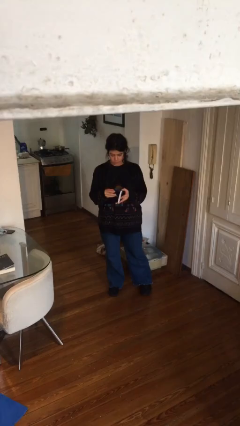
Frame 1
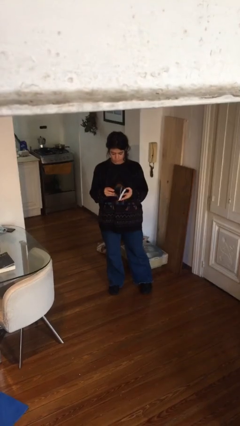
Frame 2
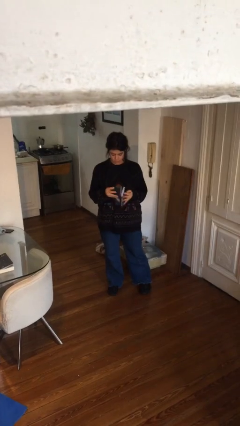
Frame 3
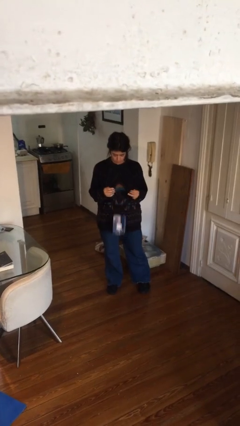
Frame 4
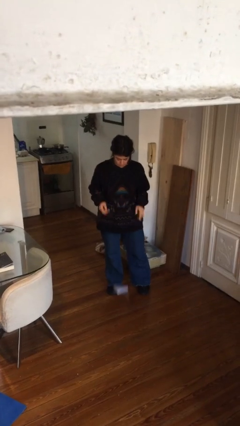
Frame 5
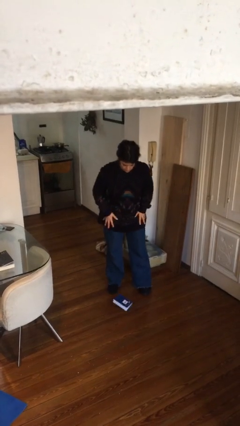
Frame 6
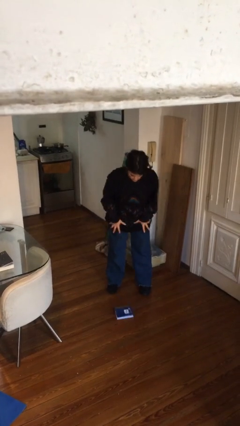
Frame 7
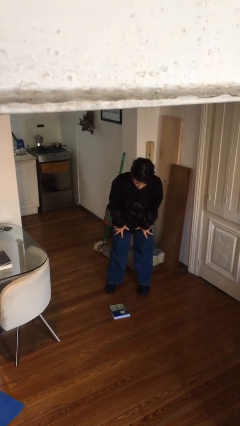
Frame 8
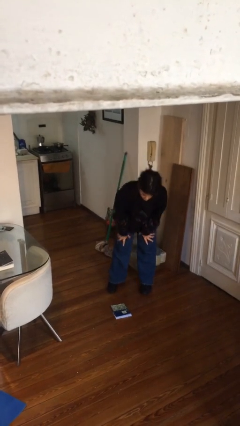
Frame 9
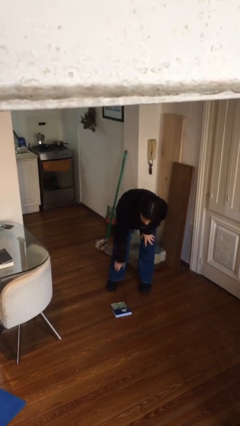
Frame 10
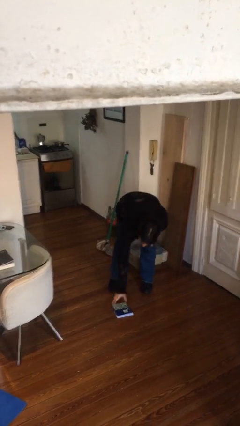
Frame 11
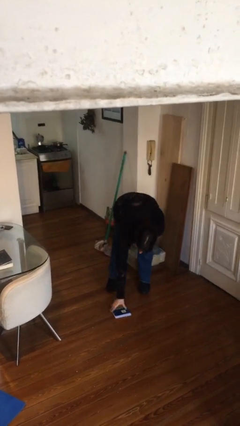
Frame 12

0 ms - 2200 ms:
person drops object

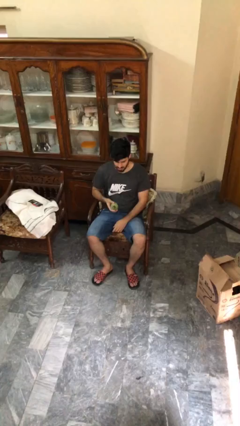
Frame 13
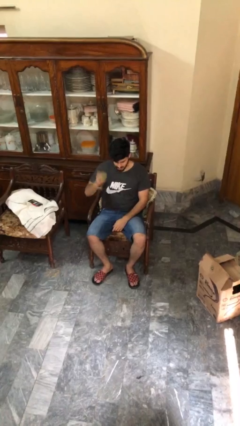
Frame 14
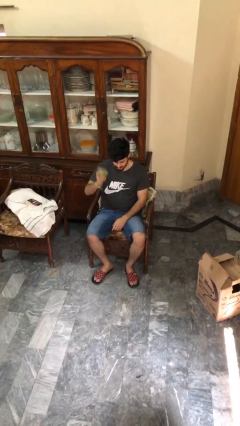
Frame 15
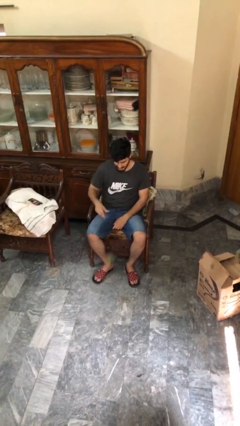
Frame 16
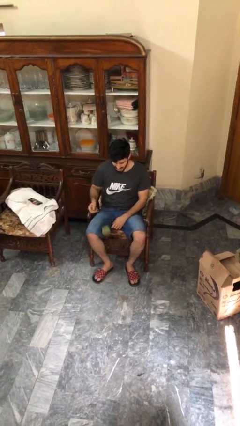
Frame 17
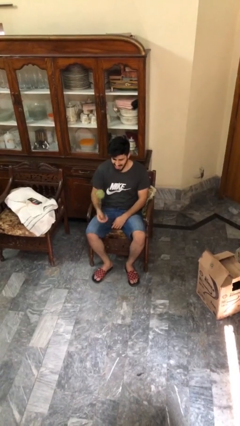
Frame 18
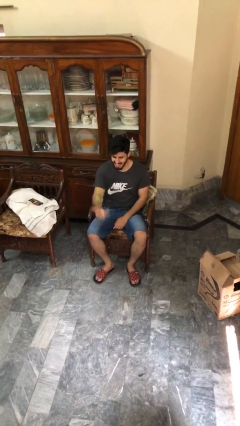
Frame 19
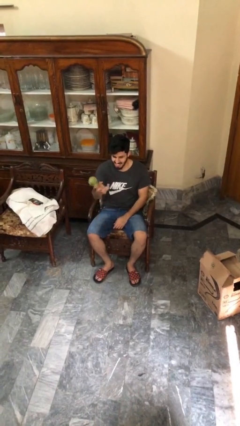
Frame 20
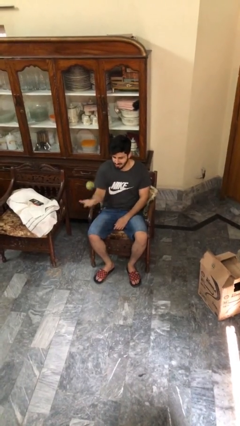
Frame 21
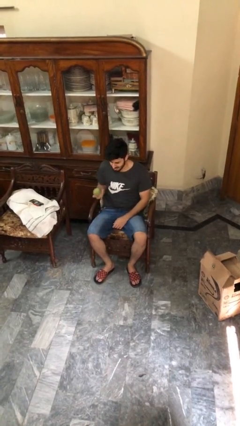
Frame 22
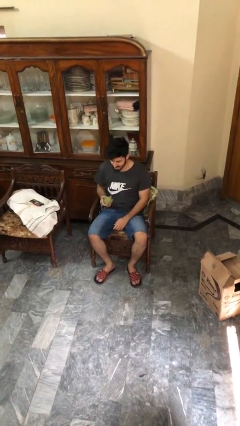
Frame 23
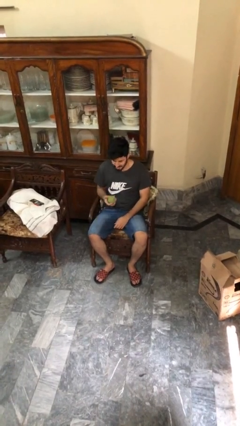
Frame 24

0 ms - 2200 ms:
person bounces ball on floor

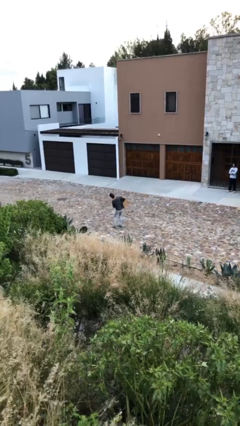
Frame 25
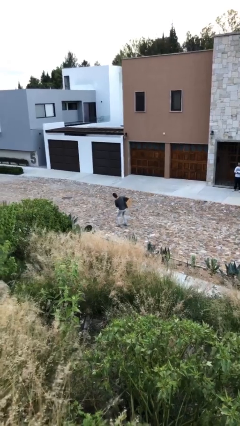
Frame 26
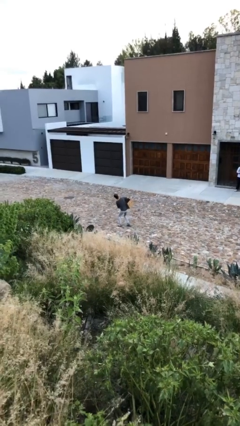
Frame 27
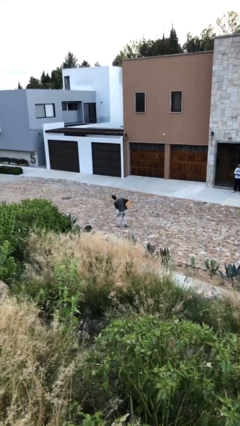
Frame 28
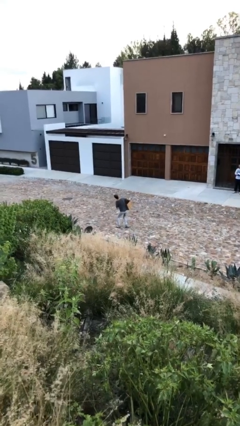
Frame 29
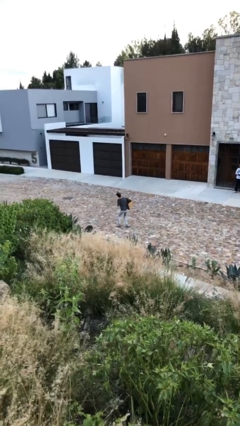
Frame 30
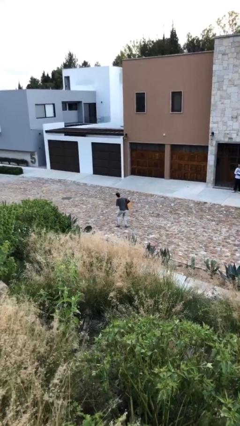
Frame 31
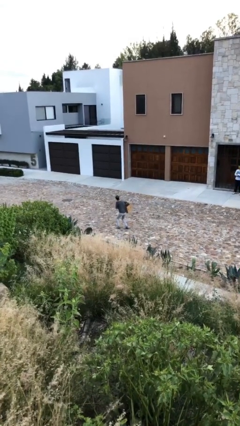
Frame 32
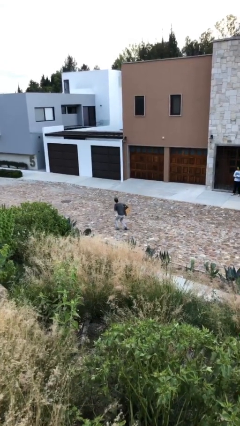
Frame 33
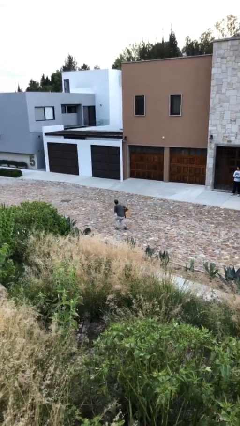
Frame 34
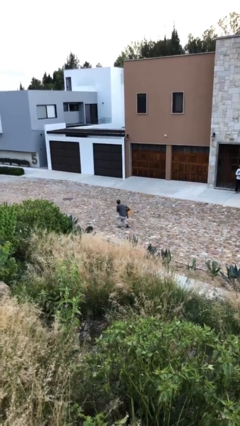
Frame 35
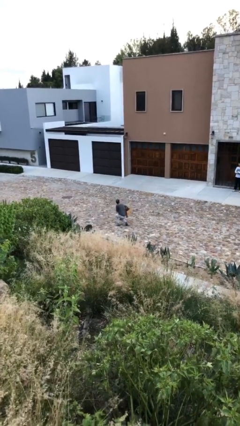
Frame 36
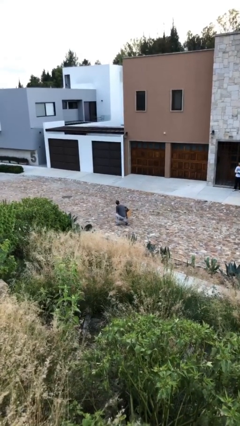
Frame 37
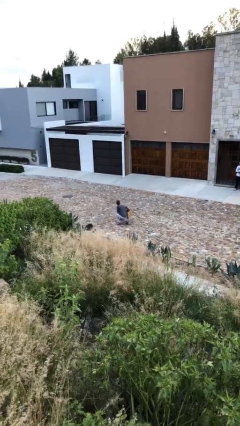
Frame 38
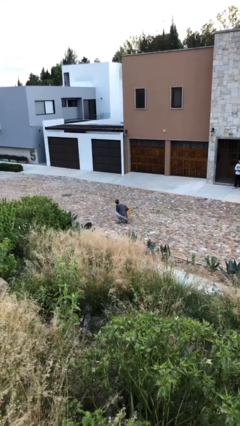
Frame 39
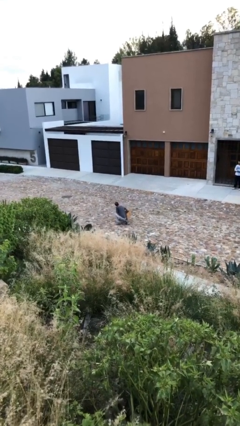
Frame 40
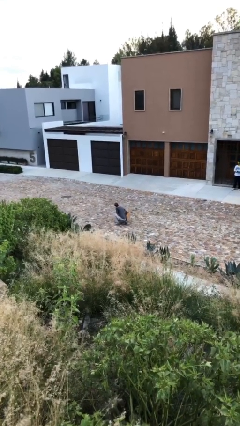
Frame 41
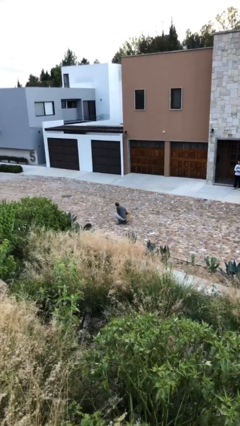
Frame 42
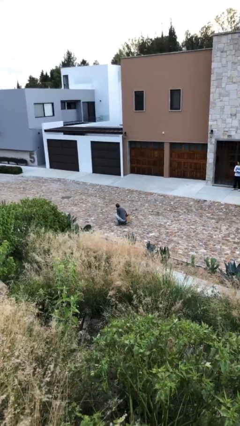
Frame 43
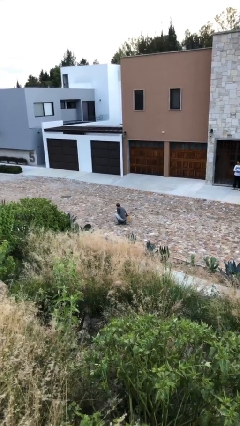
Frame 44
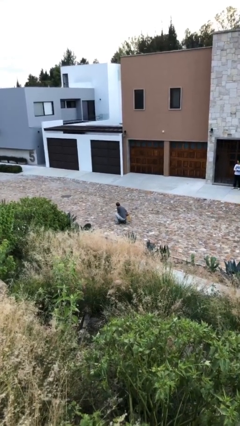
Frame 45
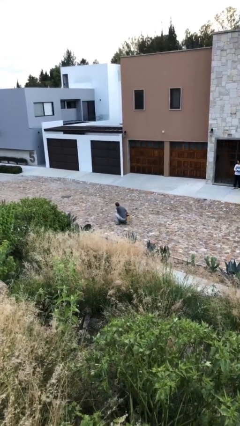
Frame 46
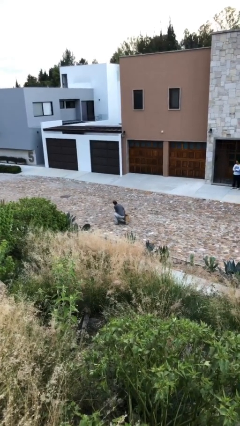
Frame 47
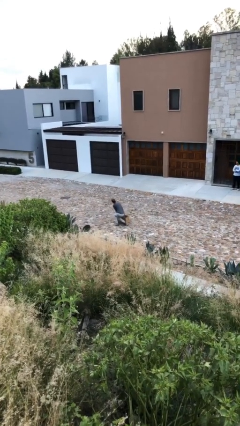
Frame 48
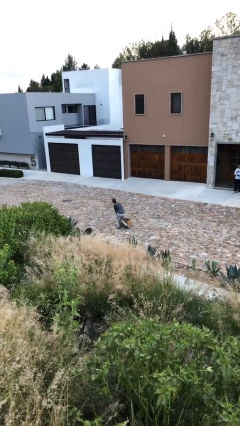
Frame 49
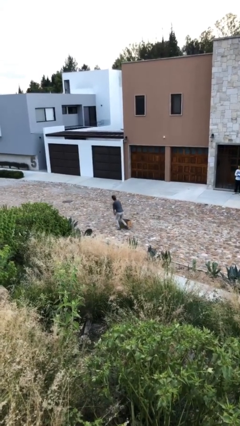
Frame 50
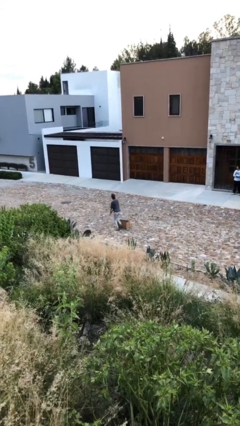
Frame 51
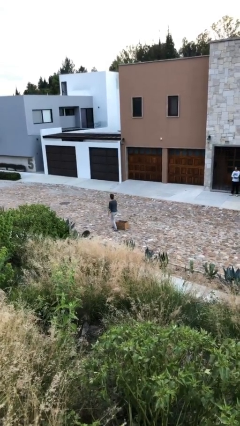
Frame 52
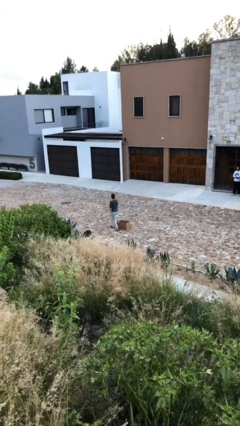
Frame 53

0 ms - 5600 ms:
person puts down object on floor

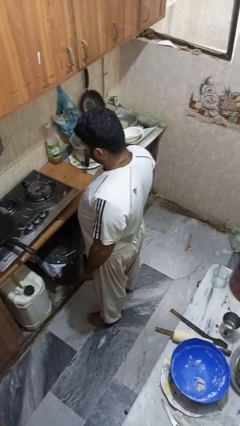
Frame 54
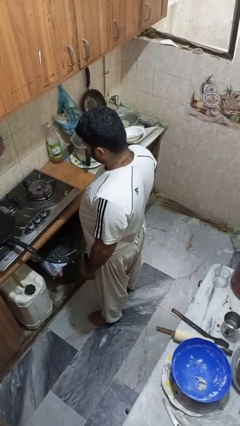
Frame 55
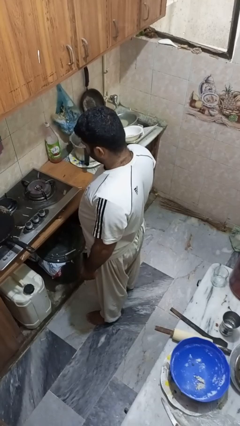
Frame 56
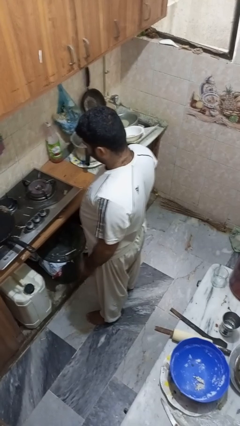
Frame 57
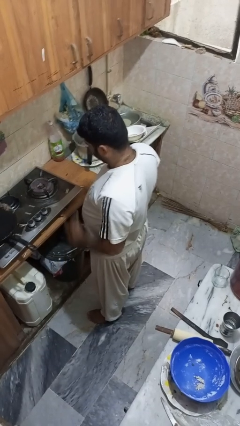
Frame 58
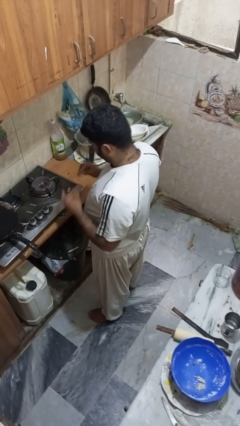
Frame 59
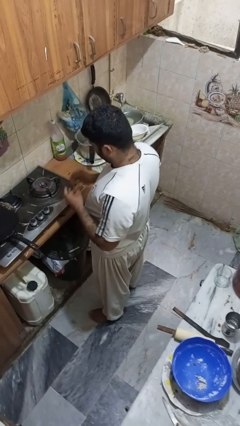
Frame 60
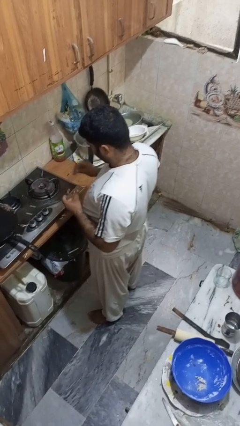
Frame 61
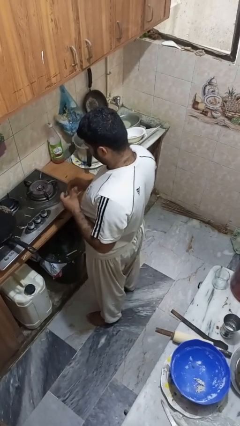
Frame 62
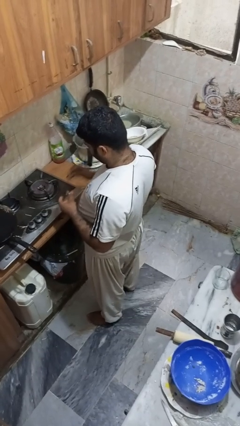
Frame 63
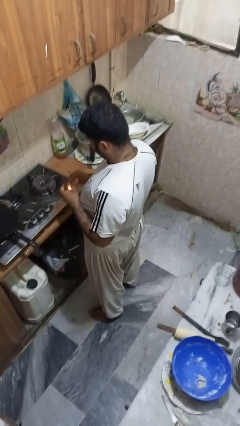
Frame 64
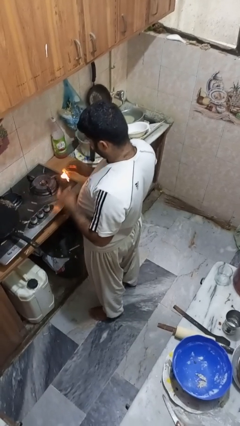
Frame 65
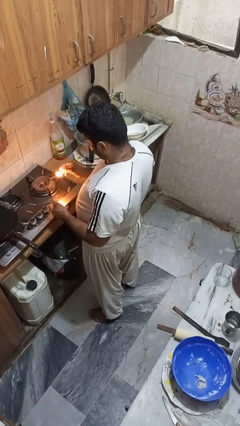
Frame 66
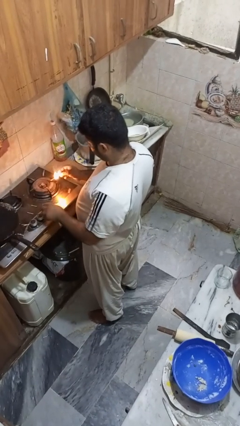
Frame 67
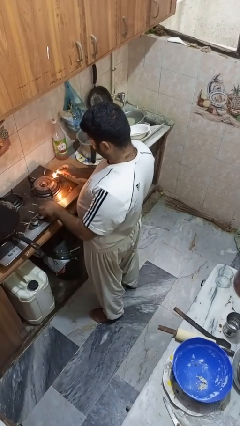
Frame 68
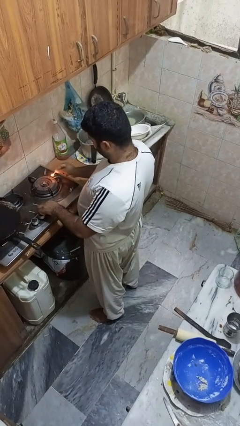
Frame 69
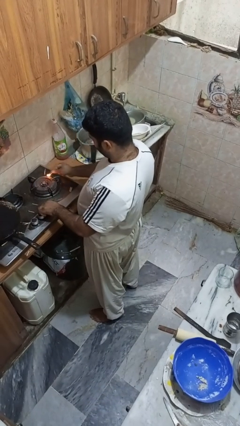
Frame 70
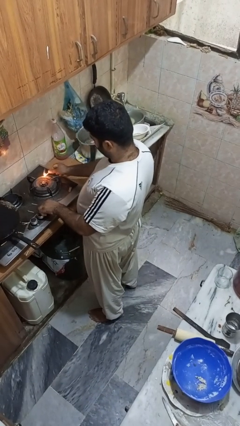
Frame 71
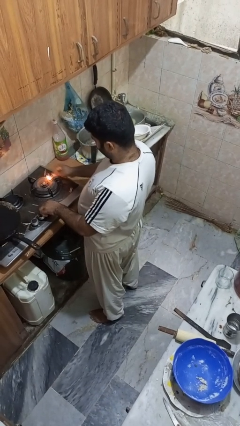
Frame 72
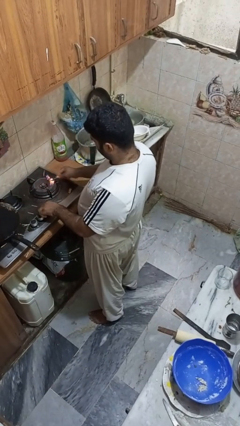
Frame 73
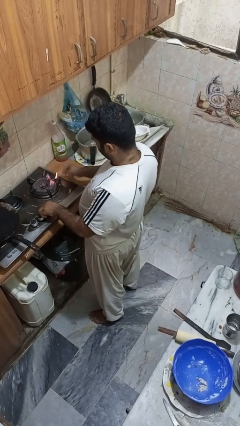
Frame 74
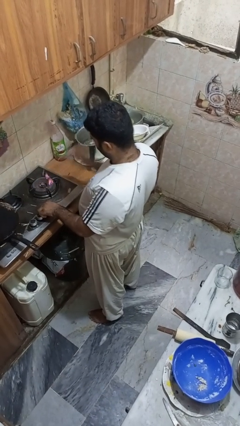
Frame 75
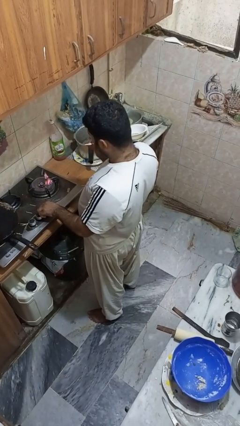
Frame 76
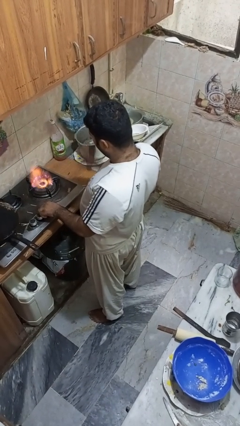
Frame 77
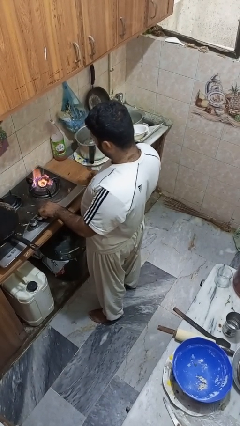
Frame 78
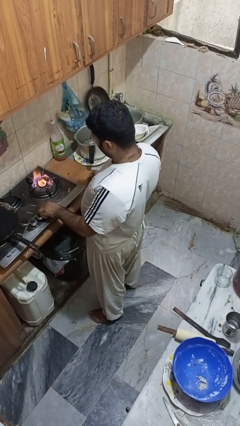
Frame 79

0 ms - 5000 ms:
person turns on stovetop

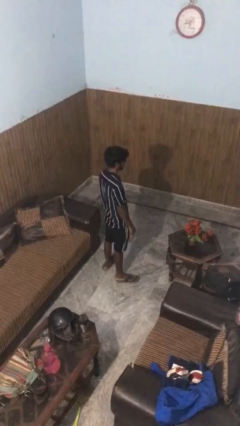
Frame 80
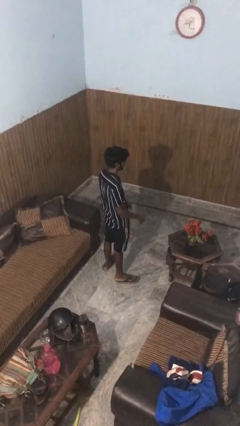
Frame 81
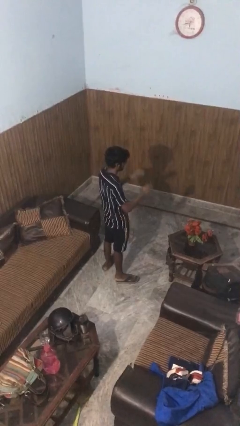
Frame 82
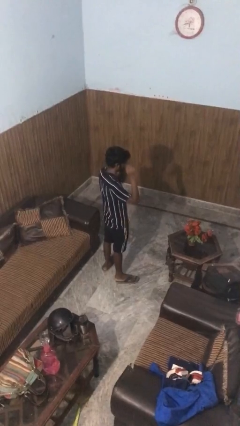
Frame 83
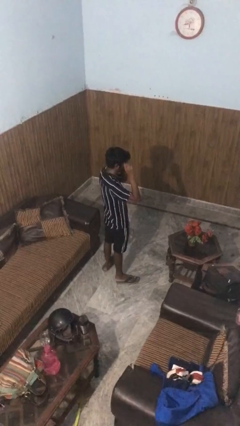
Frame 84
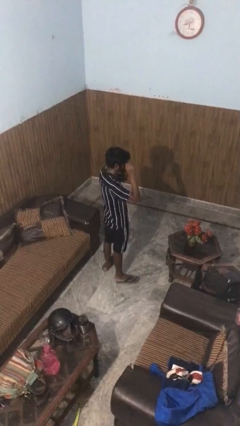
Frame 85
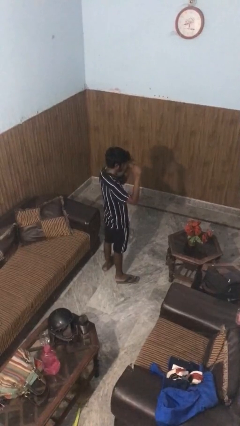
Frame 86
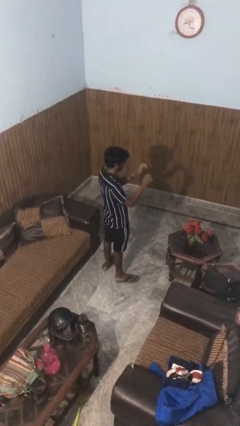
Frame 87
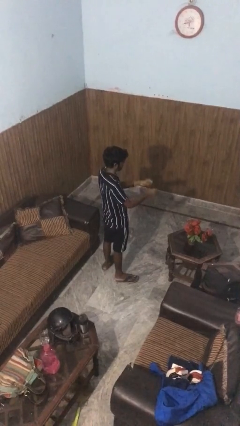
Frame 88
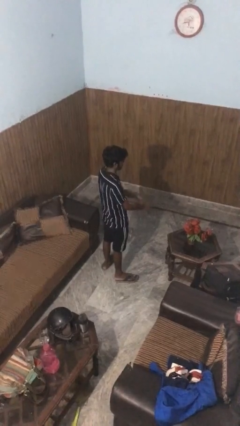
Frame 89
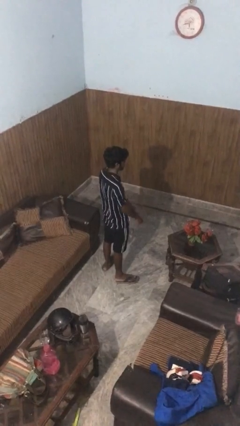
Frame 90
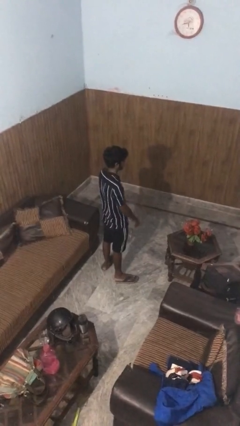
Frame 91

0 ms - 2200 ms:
person takes off glasses

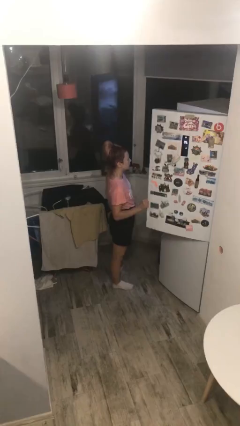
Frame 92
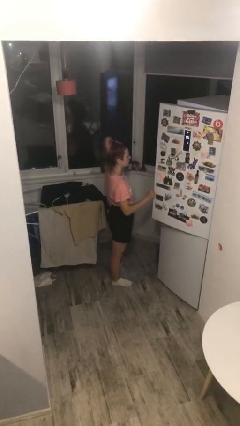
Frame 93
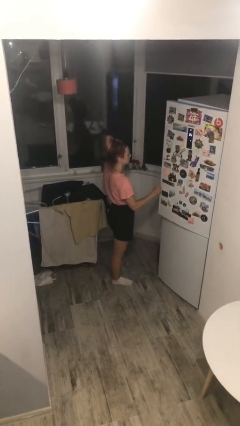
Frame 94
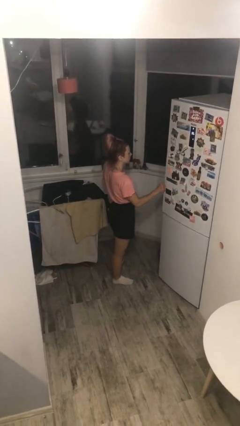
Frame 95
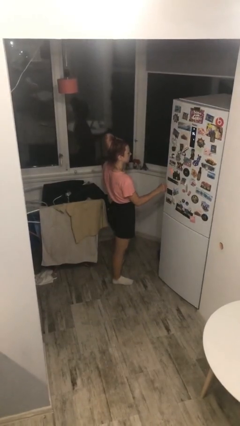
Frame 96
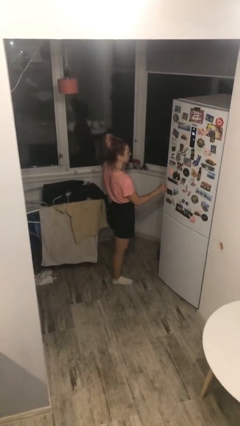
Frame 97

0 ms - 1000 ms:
person closes refrigerator
